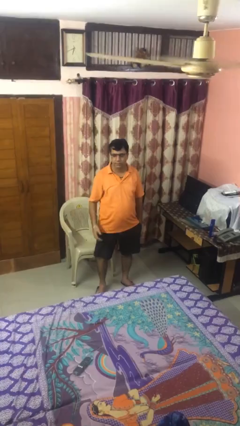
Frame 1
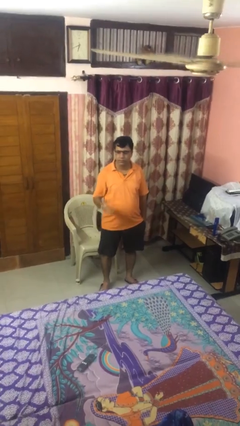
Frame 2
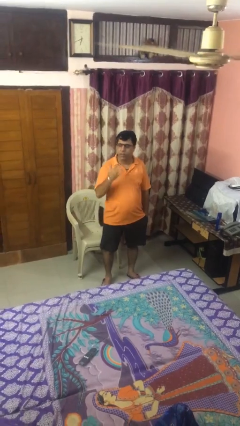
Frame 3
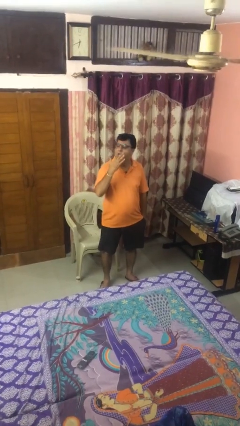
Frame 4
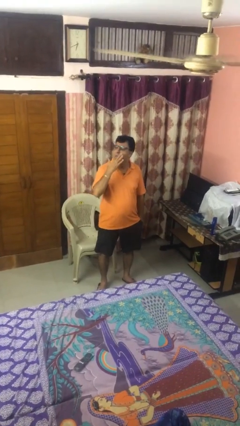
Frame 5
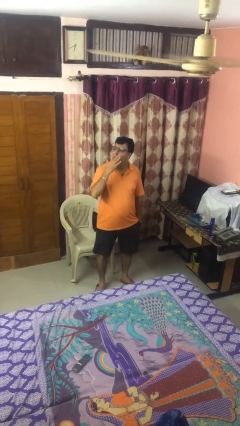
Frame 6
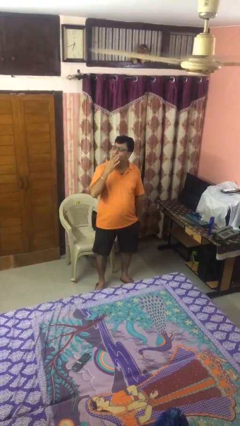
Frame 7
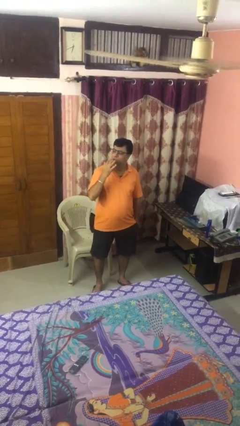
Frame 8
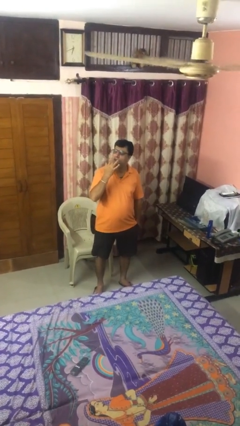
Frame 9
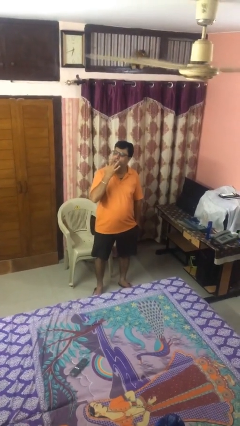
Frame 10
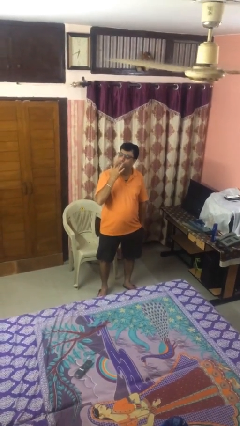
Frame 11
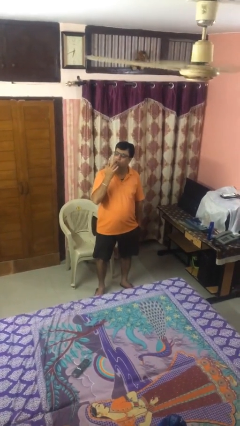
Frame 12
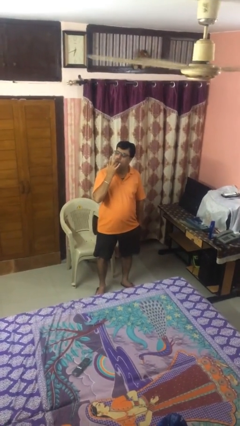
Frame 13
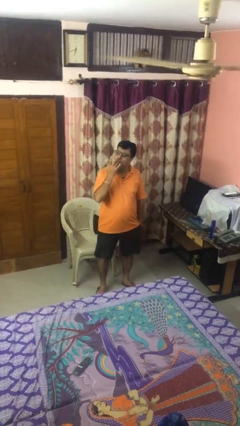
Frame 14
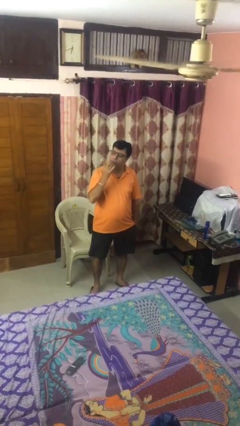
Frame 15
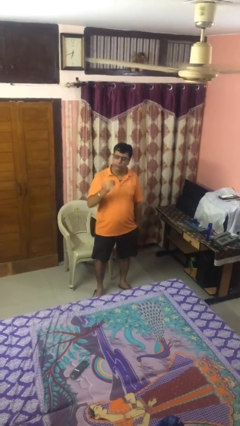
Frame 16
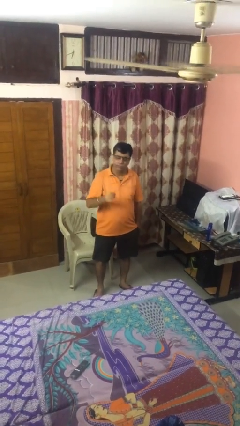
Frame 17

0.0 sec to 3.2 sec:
person licks fingers

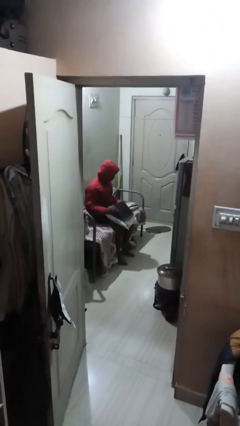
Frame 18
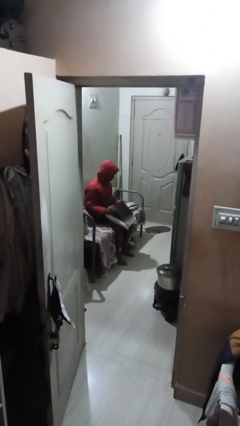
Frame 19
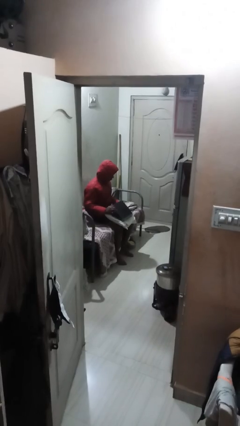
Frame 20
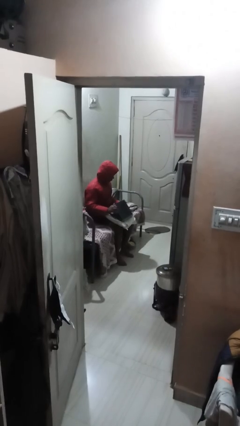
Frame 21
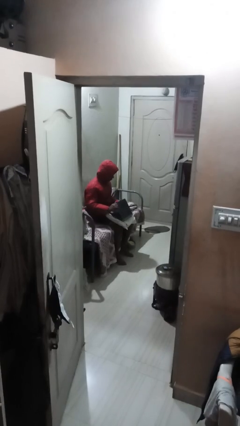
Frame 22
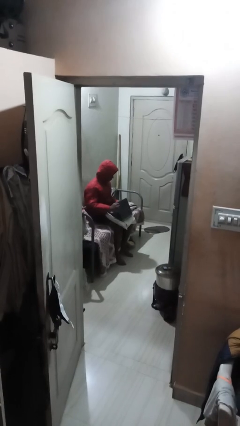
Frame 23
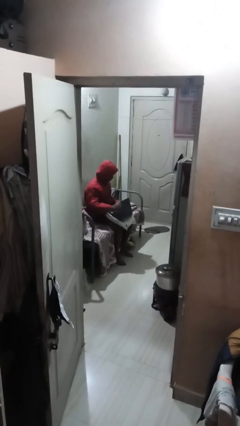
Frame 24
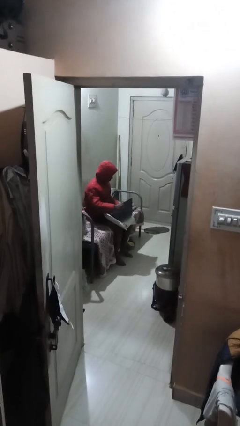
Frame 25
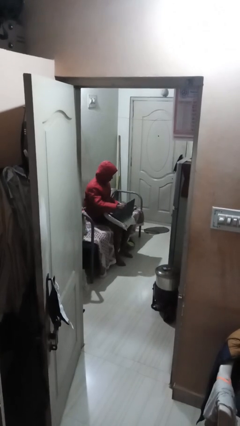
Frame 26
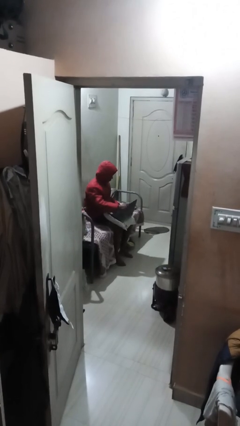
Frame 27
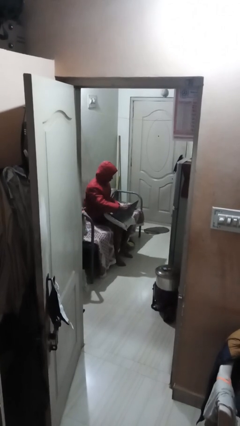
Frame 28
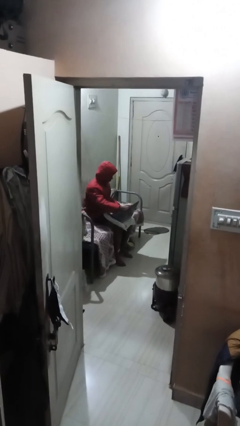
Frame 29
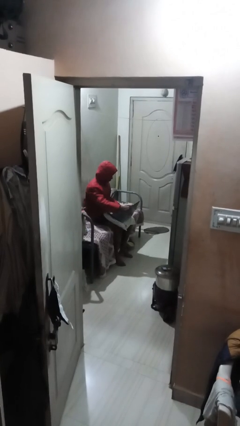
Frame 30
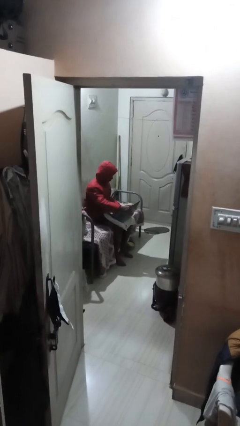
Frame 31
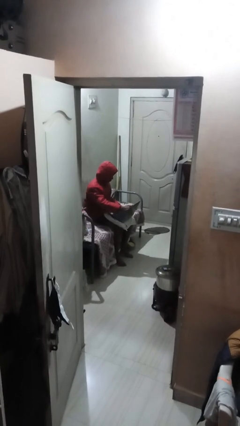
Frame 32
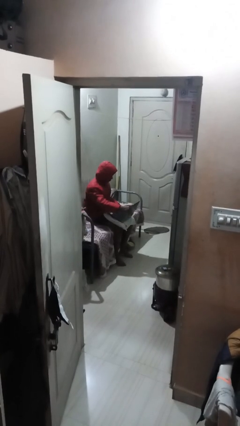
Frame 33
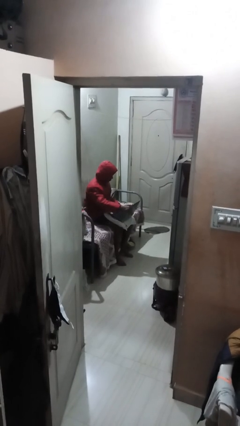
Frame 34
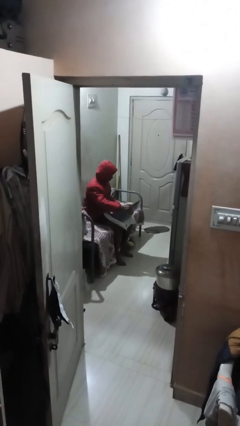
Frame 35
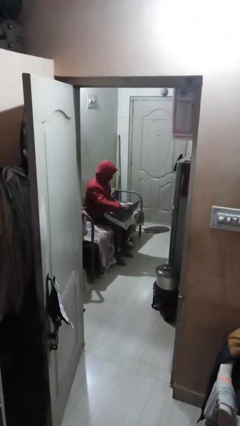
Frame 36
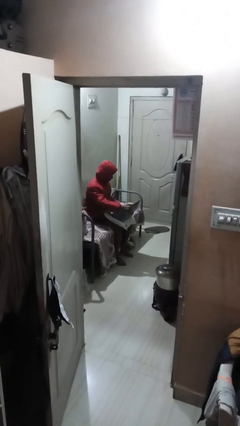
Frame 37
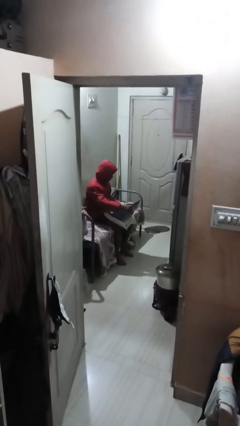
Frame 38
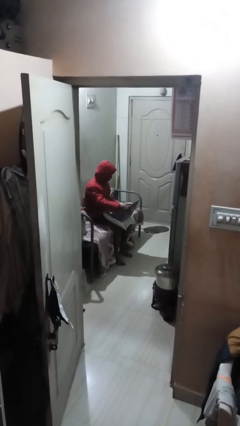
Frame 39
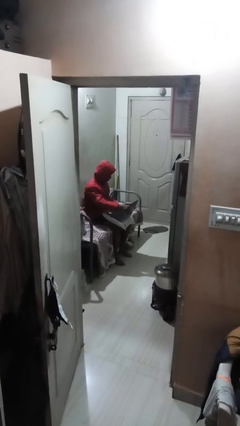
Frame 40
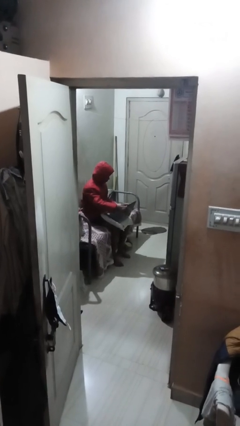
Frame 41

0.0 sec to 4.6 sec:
person interacts with laptop

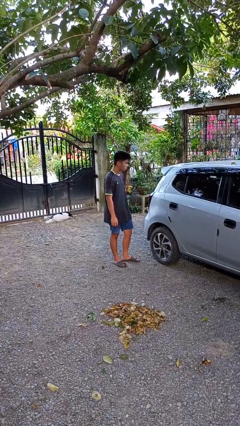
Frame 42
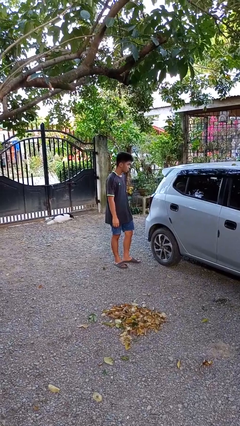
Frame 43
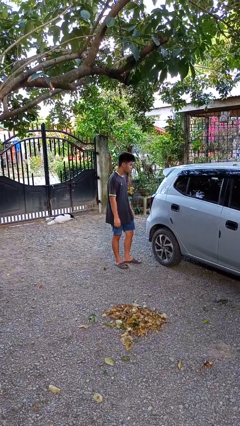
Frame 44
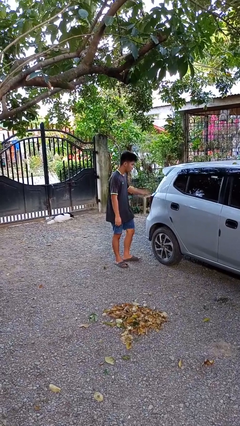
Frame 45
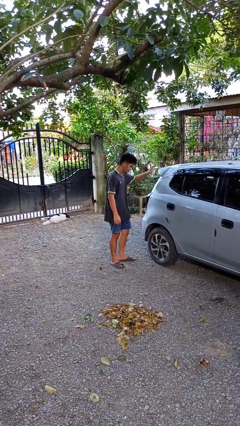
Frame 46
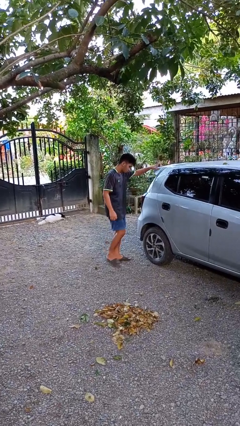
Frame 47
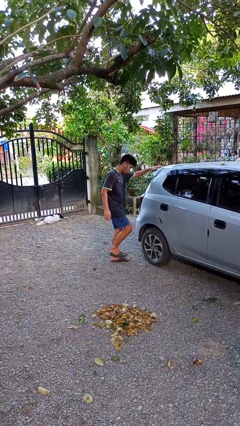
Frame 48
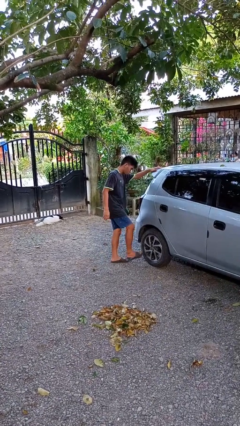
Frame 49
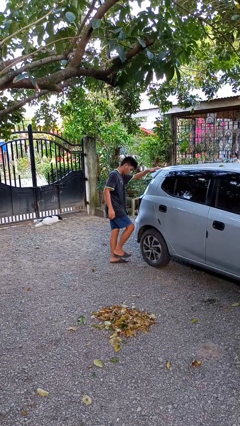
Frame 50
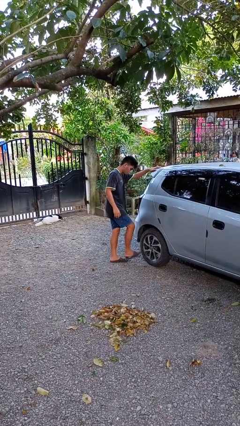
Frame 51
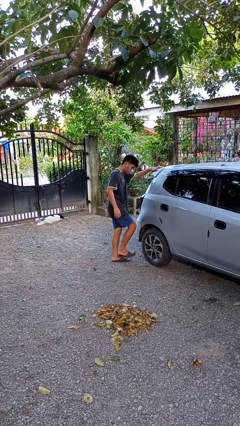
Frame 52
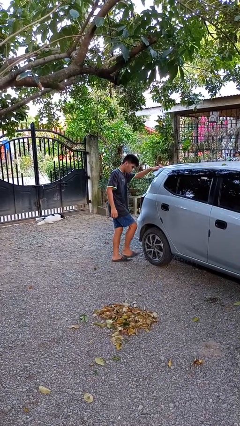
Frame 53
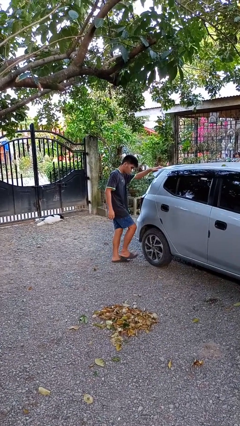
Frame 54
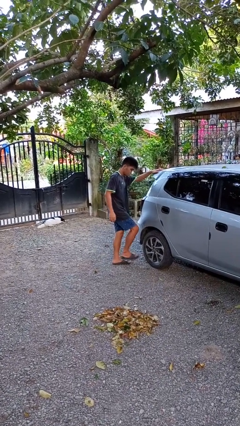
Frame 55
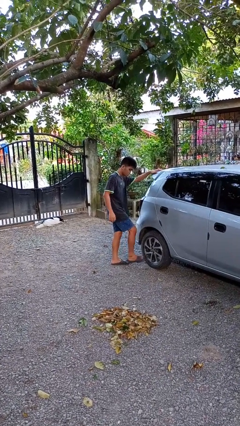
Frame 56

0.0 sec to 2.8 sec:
person kicks car tires

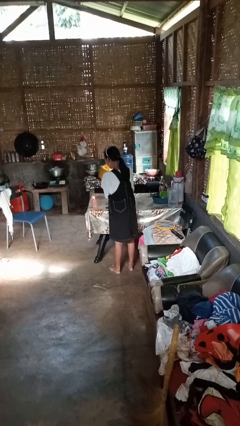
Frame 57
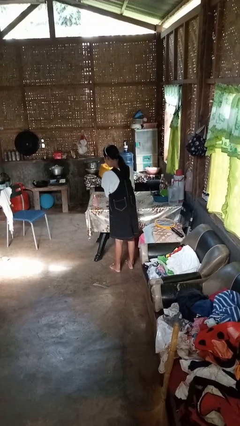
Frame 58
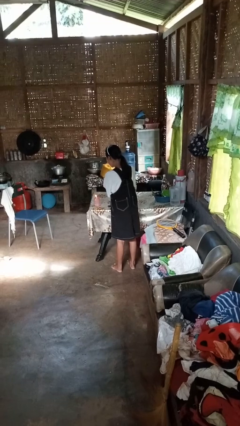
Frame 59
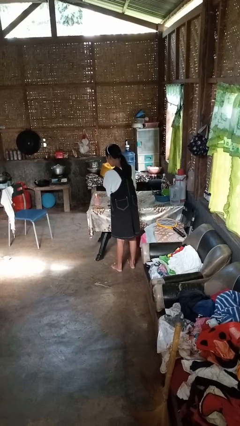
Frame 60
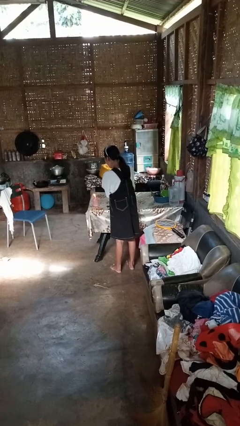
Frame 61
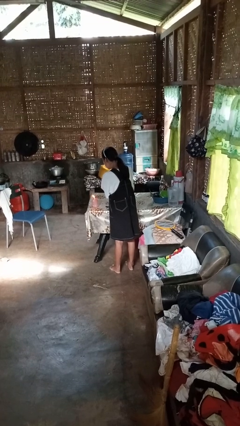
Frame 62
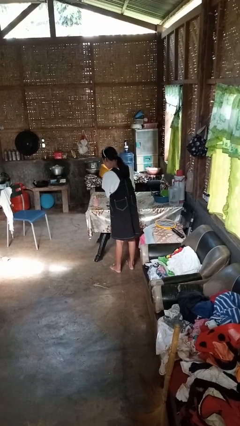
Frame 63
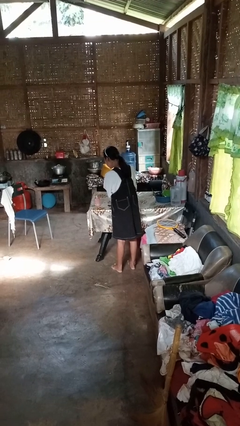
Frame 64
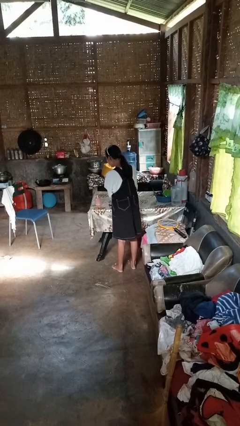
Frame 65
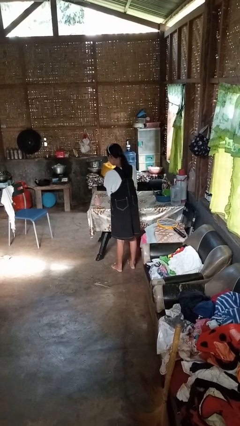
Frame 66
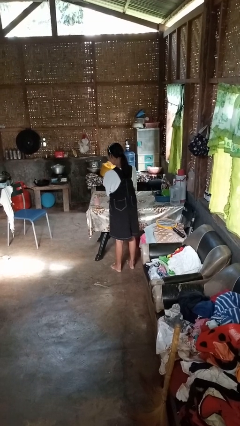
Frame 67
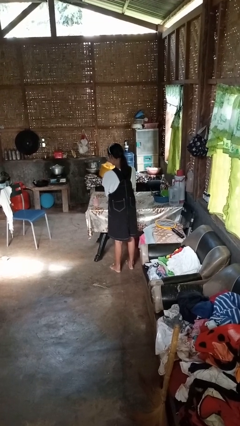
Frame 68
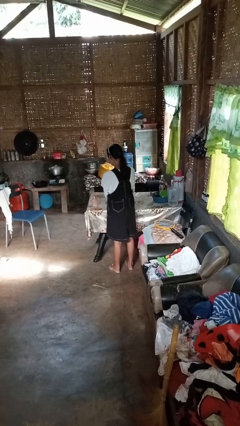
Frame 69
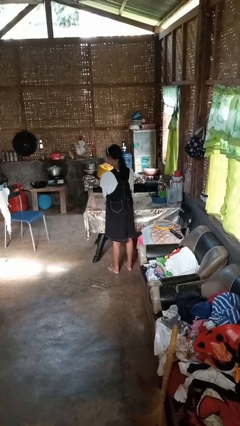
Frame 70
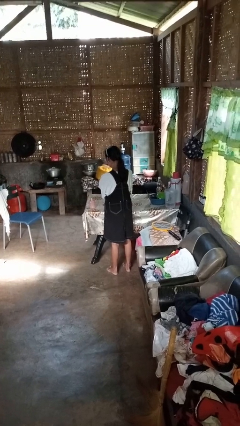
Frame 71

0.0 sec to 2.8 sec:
person extinguishes candle

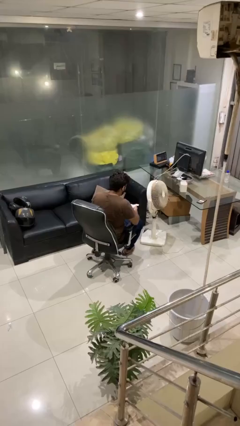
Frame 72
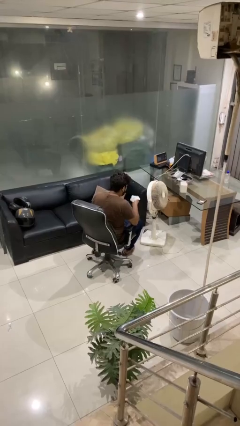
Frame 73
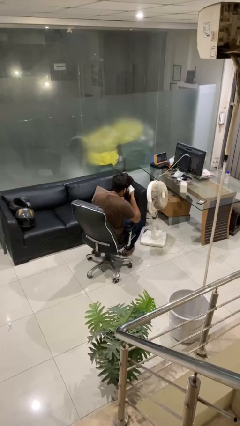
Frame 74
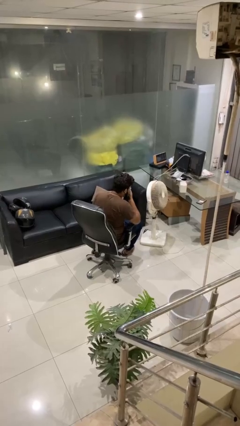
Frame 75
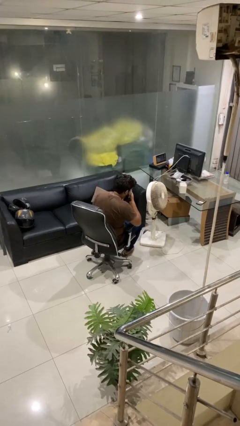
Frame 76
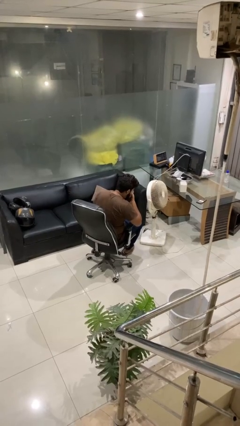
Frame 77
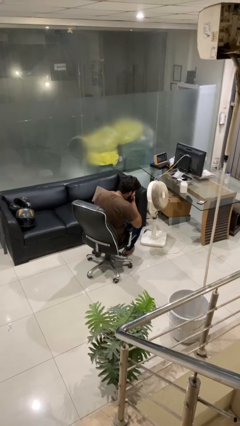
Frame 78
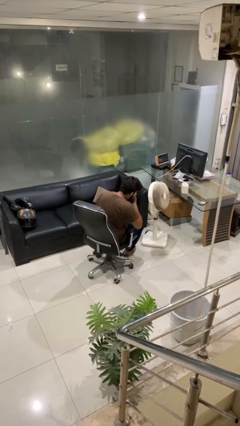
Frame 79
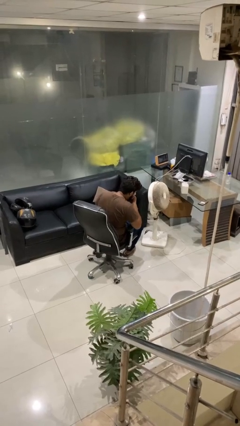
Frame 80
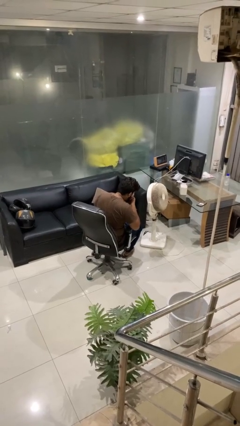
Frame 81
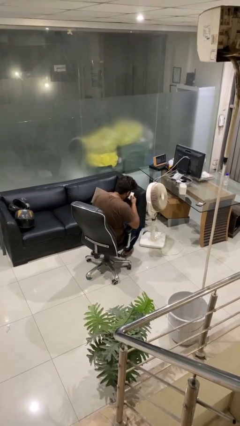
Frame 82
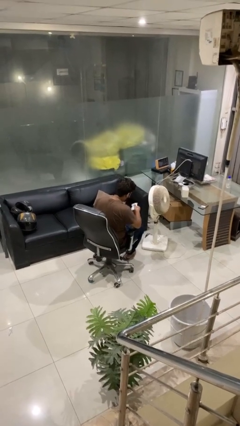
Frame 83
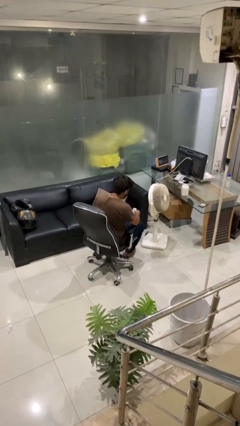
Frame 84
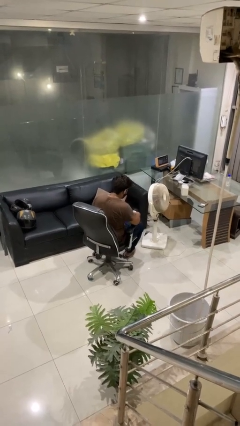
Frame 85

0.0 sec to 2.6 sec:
person blows nose

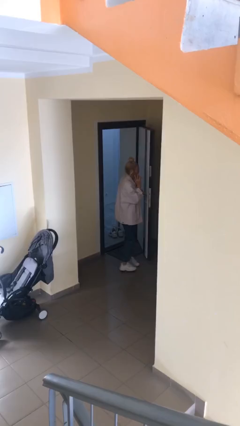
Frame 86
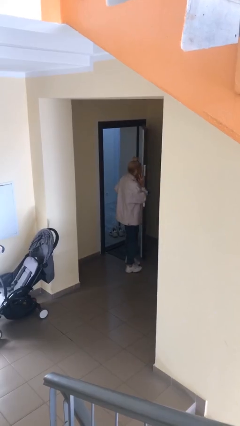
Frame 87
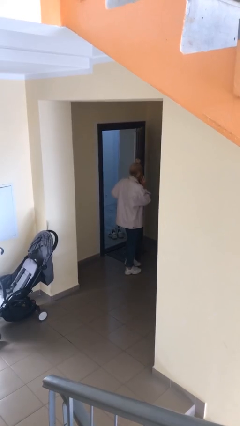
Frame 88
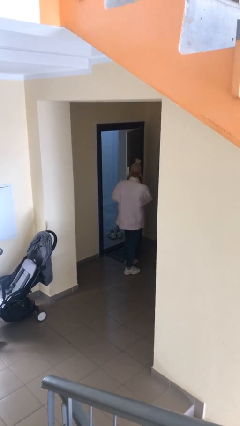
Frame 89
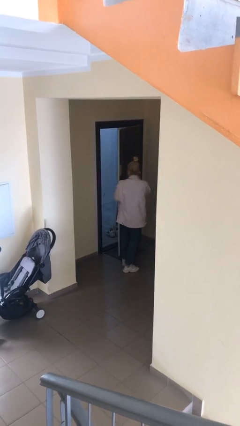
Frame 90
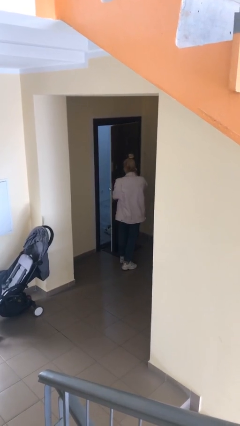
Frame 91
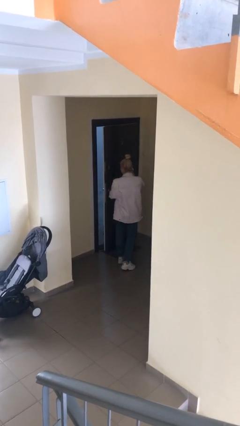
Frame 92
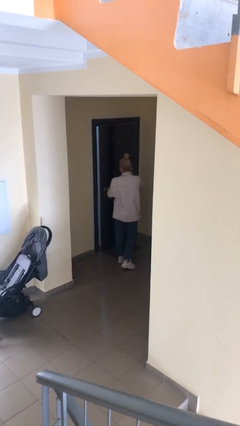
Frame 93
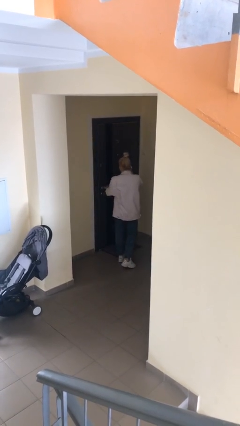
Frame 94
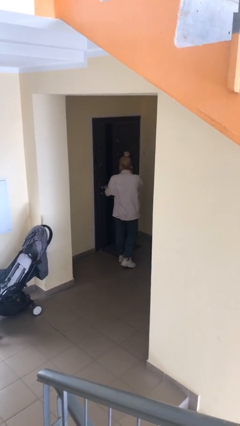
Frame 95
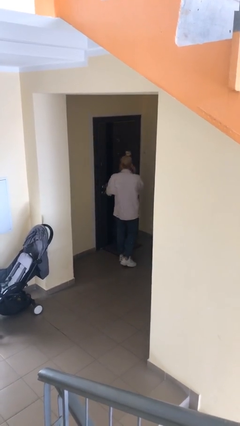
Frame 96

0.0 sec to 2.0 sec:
person closes facility door
